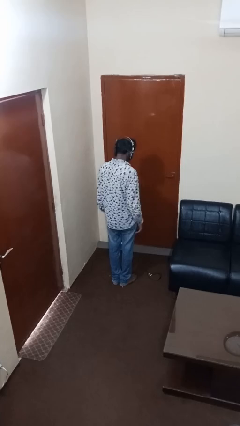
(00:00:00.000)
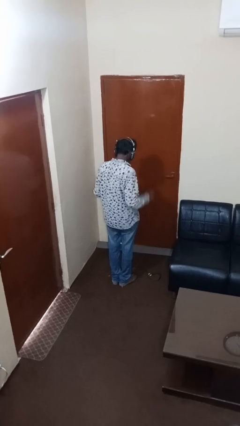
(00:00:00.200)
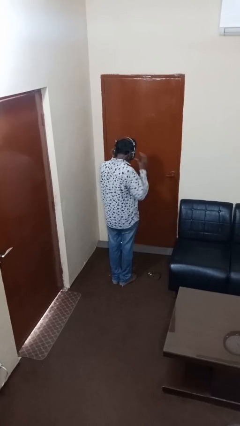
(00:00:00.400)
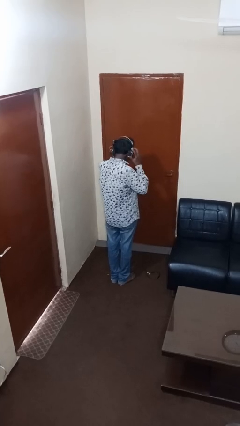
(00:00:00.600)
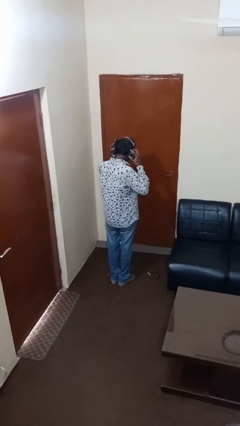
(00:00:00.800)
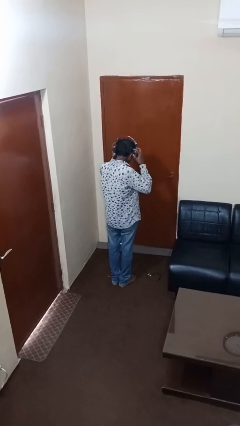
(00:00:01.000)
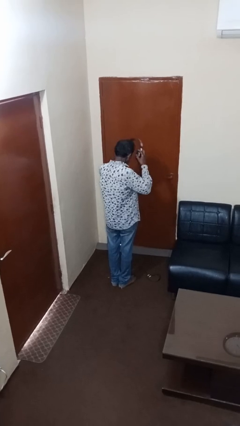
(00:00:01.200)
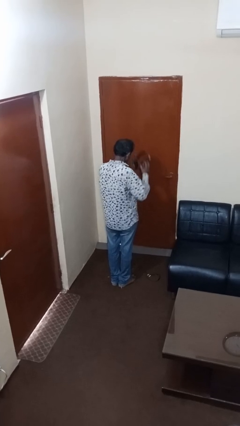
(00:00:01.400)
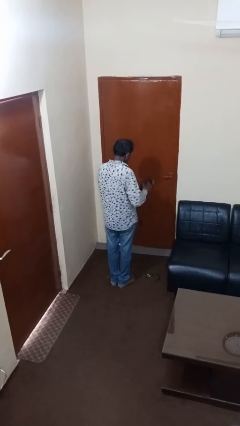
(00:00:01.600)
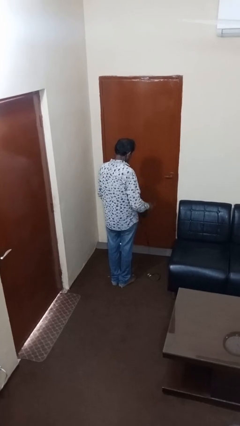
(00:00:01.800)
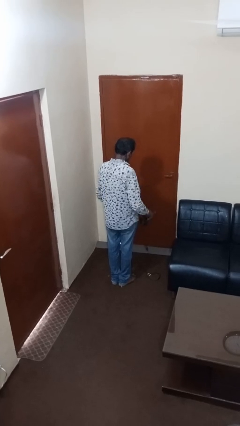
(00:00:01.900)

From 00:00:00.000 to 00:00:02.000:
person takes off headphones

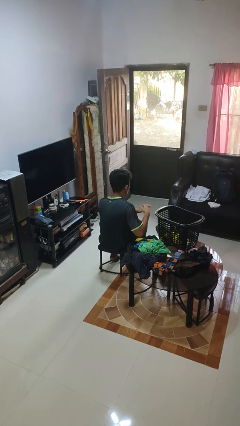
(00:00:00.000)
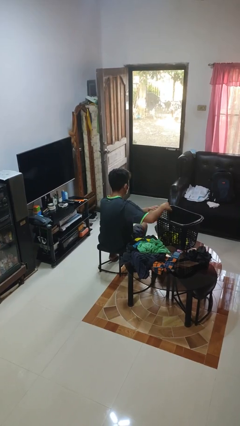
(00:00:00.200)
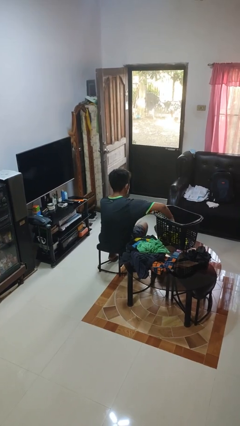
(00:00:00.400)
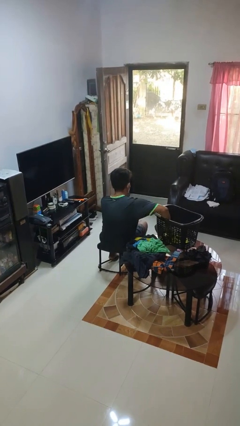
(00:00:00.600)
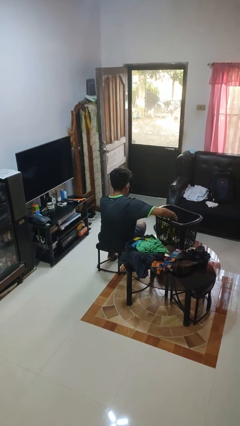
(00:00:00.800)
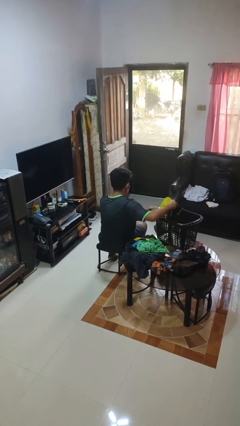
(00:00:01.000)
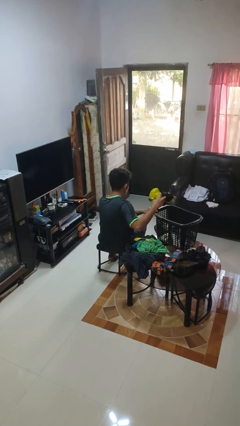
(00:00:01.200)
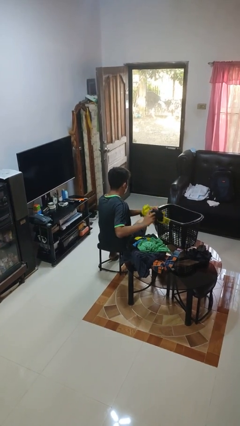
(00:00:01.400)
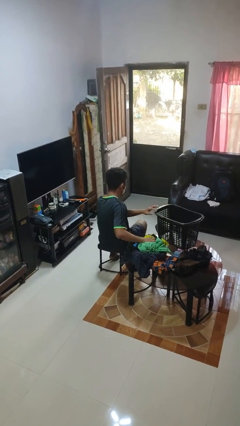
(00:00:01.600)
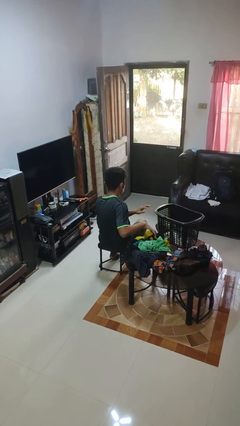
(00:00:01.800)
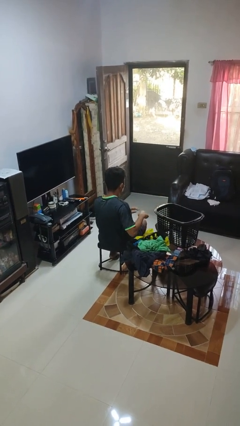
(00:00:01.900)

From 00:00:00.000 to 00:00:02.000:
person takes object from basket

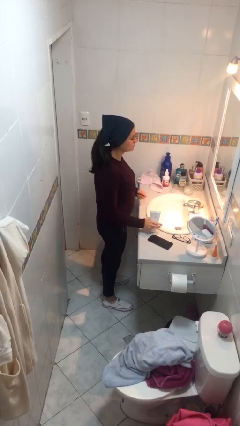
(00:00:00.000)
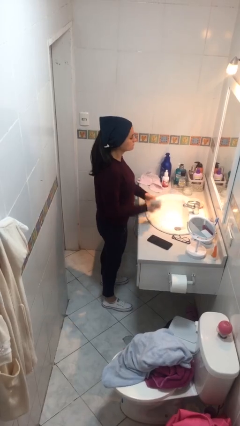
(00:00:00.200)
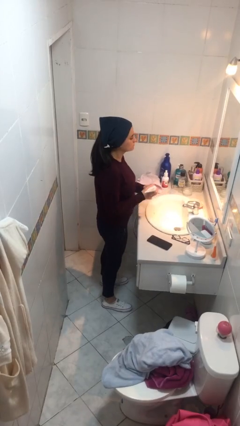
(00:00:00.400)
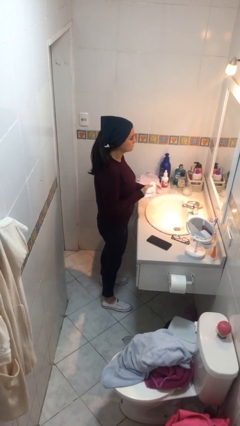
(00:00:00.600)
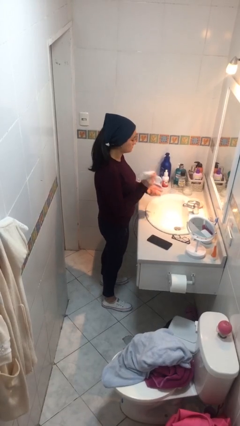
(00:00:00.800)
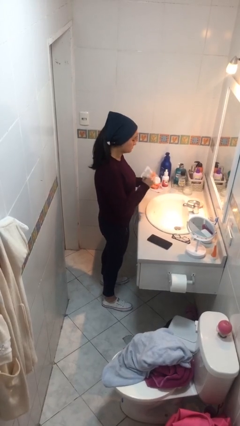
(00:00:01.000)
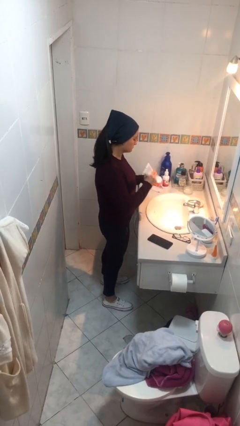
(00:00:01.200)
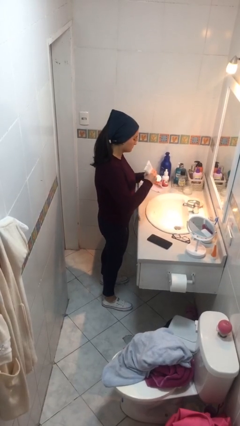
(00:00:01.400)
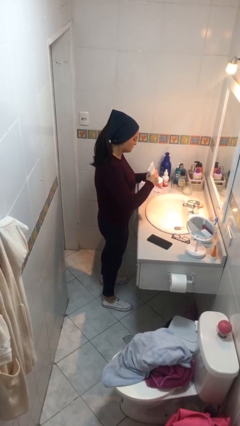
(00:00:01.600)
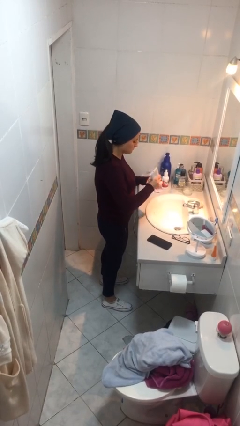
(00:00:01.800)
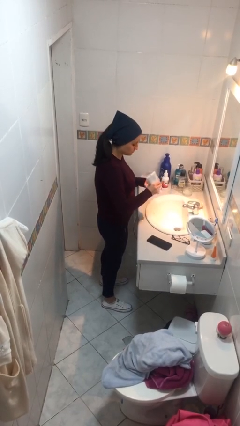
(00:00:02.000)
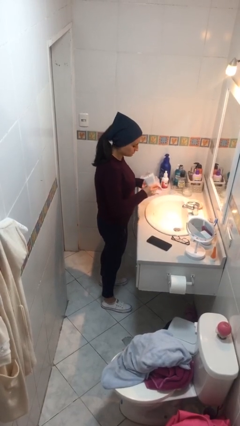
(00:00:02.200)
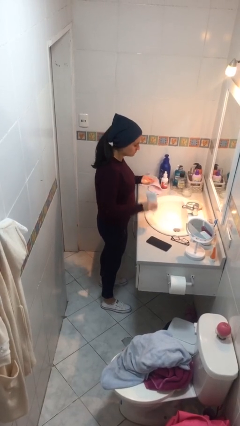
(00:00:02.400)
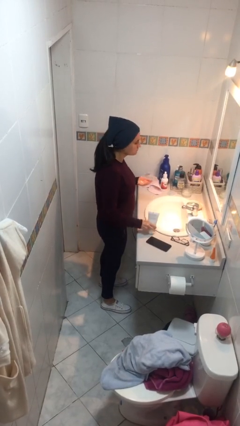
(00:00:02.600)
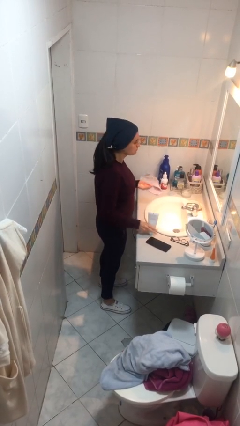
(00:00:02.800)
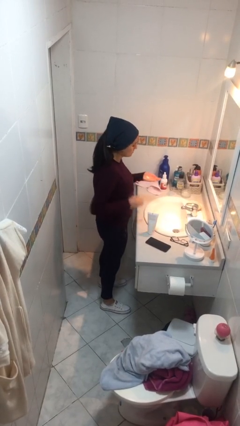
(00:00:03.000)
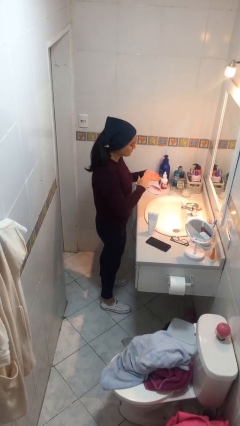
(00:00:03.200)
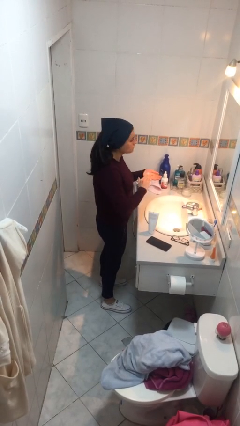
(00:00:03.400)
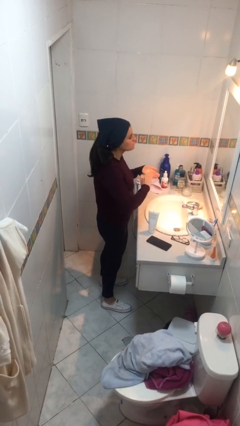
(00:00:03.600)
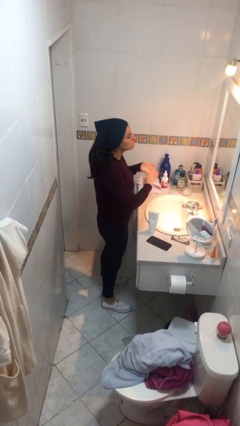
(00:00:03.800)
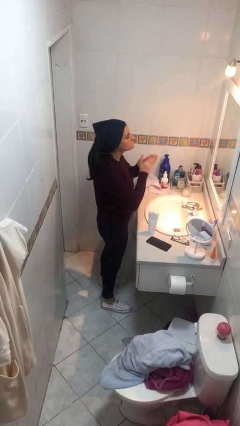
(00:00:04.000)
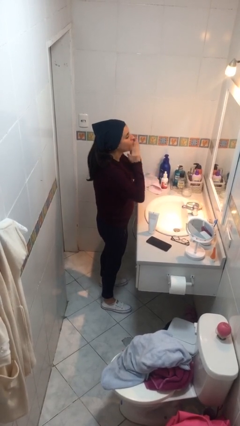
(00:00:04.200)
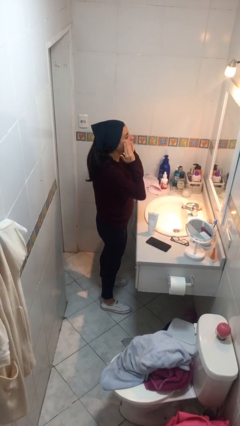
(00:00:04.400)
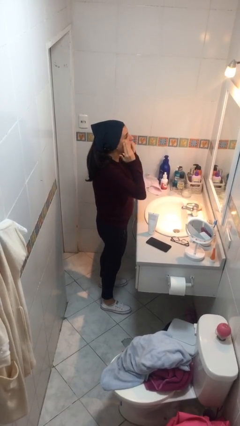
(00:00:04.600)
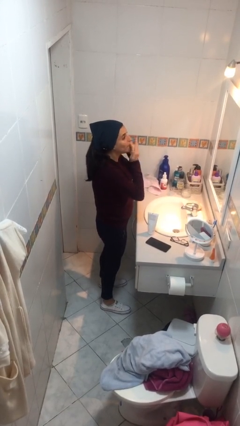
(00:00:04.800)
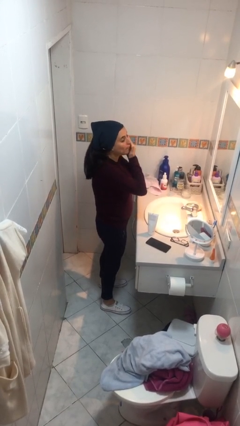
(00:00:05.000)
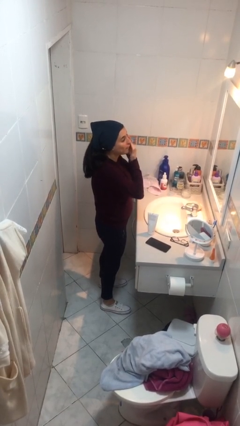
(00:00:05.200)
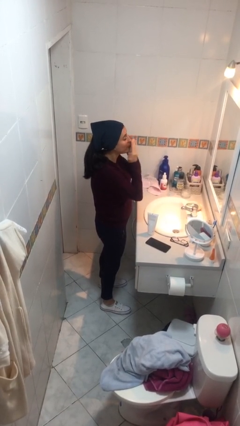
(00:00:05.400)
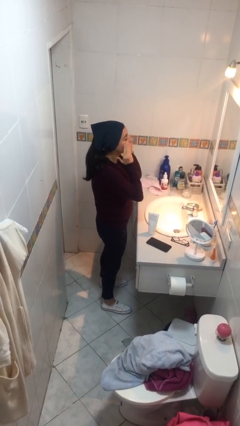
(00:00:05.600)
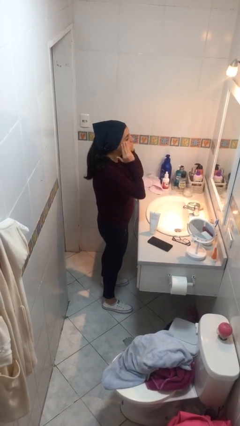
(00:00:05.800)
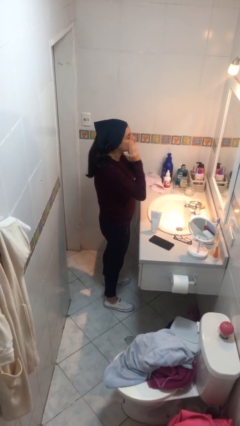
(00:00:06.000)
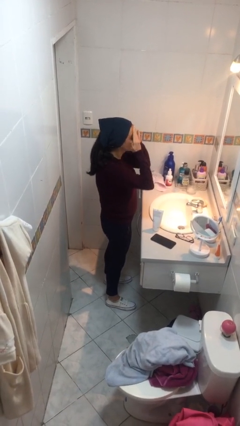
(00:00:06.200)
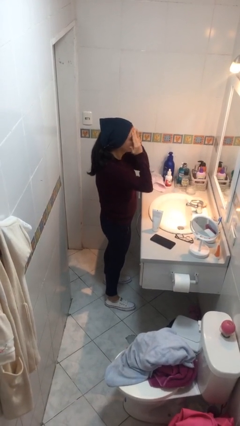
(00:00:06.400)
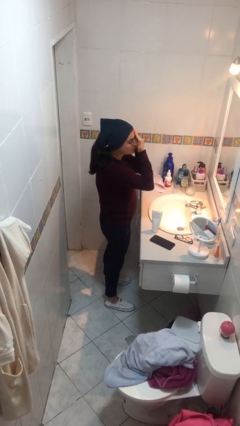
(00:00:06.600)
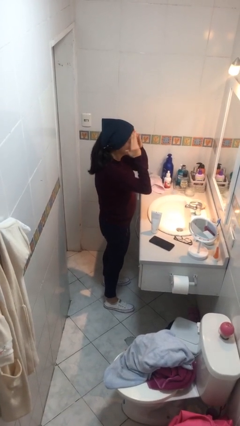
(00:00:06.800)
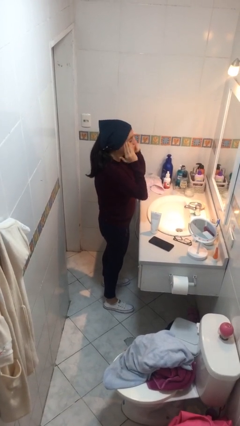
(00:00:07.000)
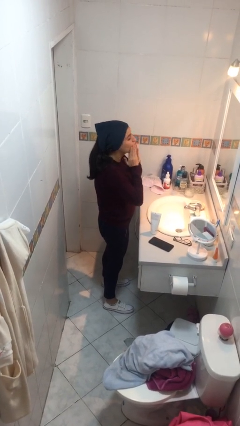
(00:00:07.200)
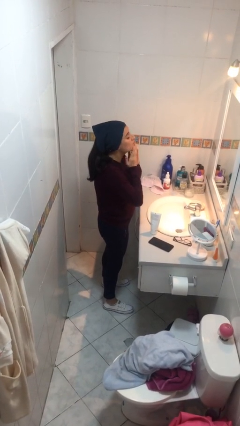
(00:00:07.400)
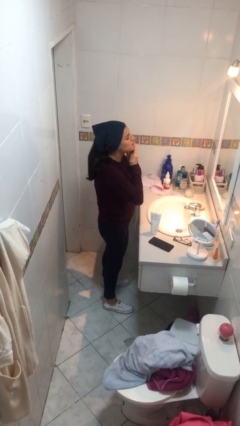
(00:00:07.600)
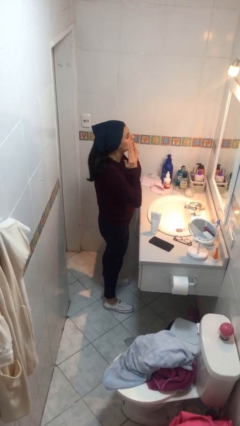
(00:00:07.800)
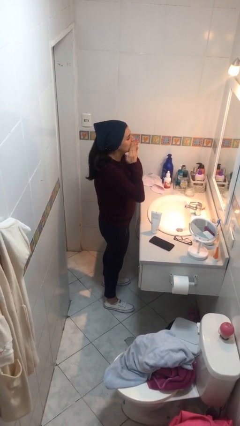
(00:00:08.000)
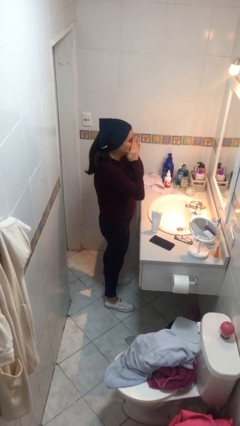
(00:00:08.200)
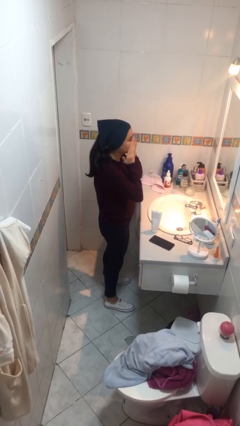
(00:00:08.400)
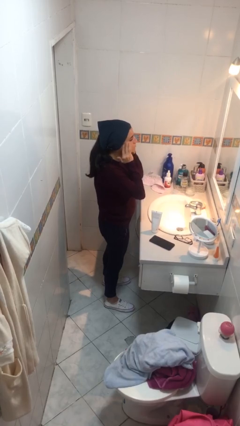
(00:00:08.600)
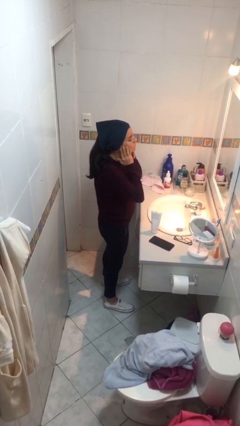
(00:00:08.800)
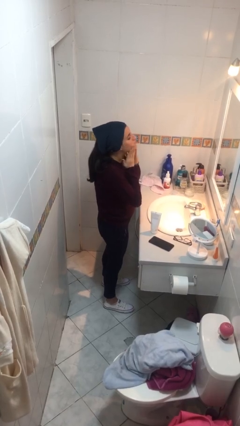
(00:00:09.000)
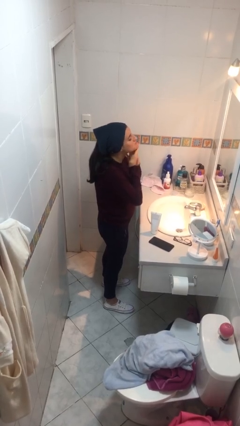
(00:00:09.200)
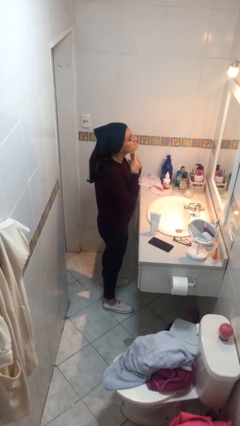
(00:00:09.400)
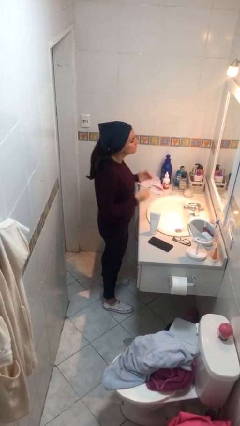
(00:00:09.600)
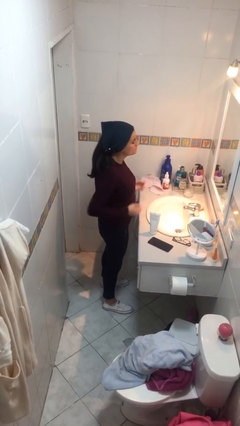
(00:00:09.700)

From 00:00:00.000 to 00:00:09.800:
person applies facial moisturizer

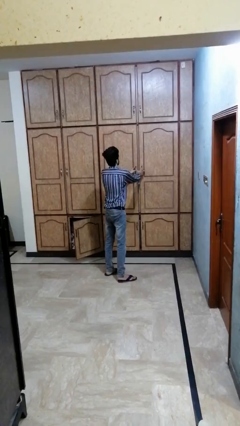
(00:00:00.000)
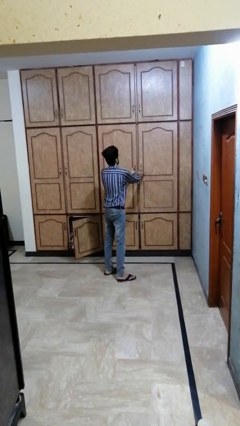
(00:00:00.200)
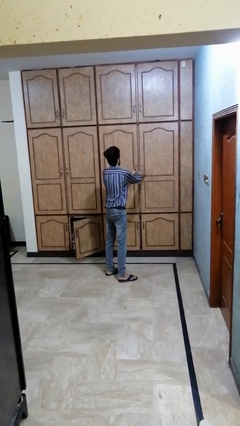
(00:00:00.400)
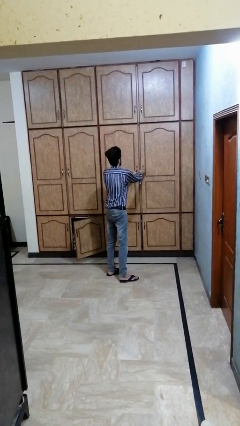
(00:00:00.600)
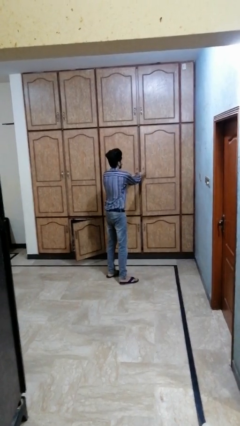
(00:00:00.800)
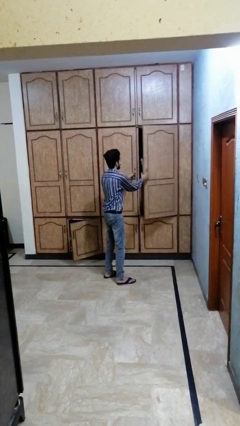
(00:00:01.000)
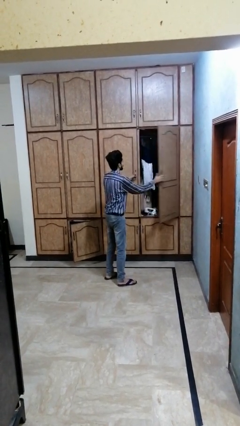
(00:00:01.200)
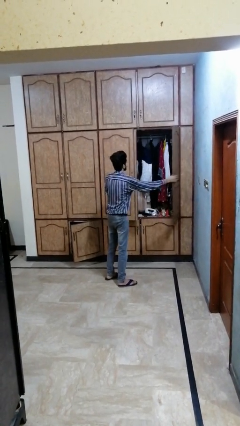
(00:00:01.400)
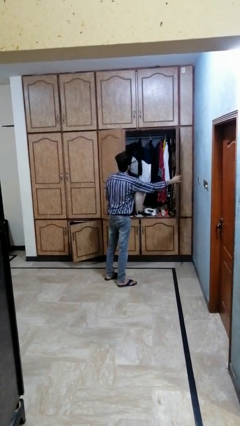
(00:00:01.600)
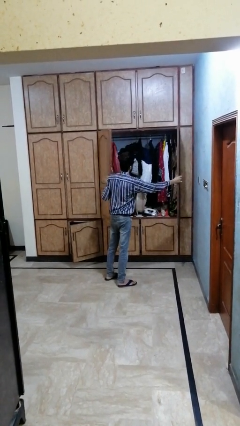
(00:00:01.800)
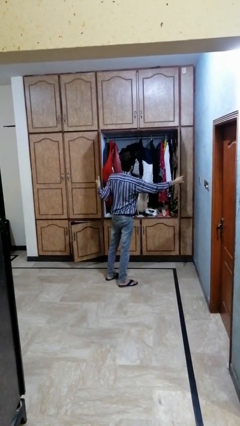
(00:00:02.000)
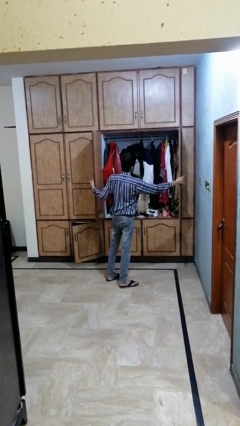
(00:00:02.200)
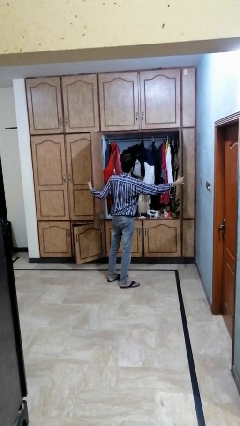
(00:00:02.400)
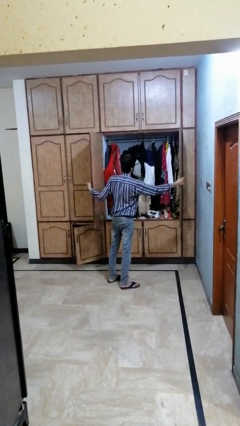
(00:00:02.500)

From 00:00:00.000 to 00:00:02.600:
person opens dresser drawer

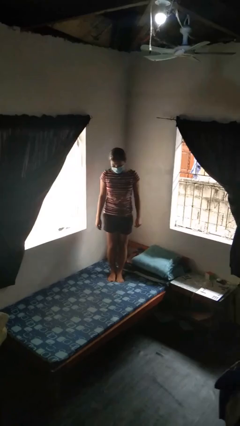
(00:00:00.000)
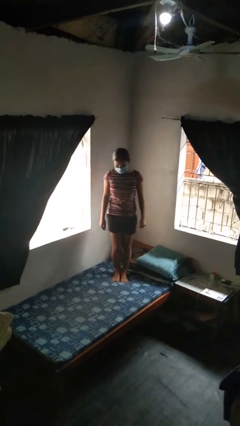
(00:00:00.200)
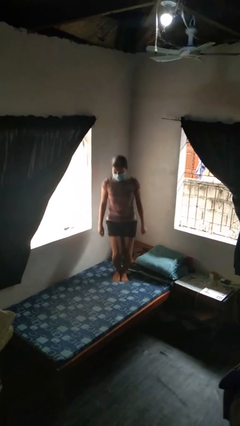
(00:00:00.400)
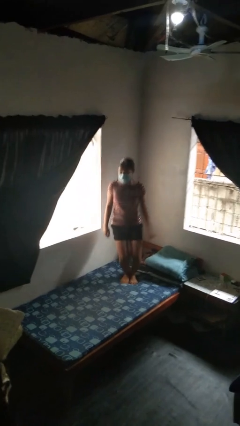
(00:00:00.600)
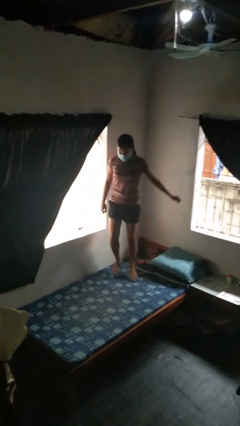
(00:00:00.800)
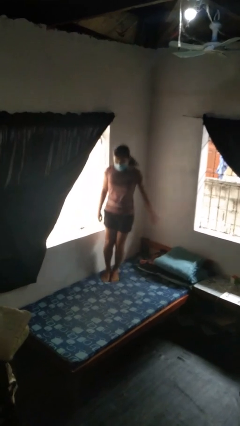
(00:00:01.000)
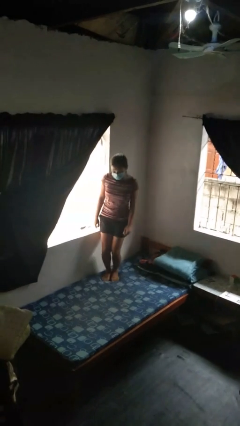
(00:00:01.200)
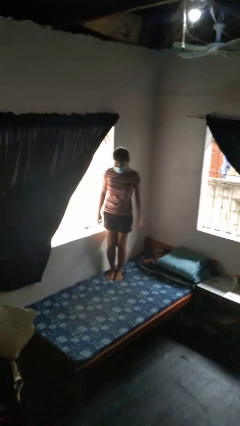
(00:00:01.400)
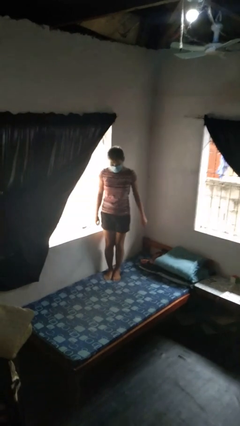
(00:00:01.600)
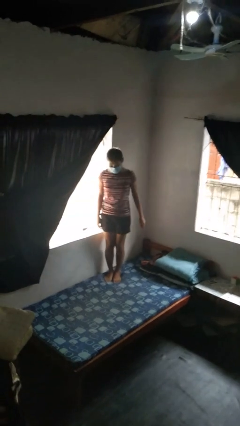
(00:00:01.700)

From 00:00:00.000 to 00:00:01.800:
person jumps on bed
